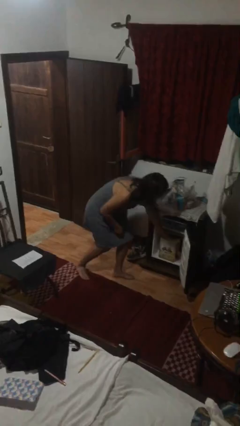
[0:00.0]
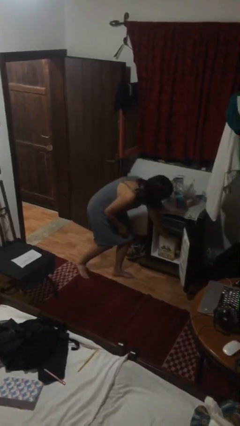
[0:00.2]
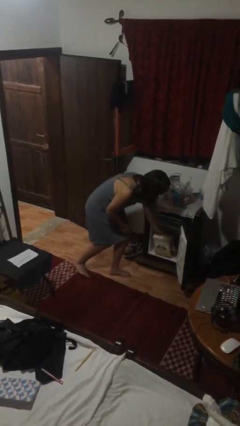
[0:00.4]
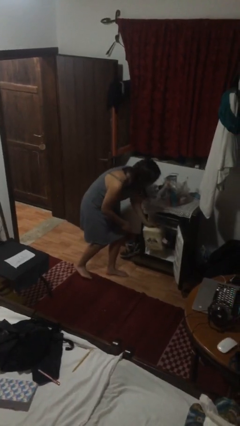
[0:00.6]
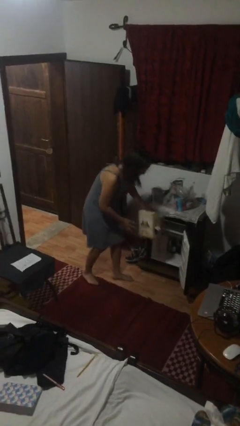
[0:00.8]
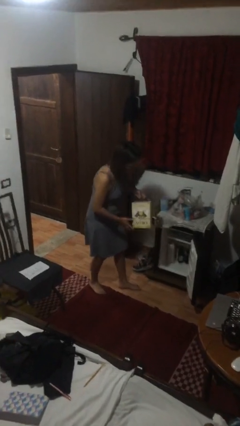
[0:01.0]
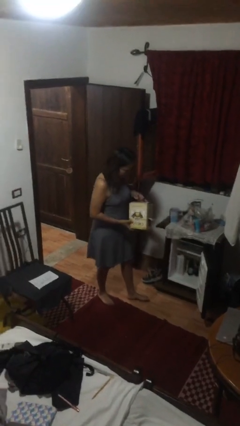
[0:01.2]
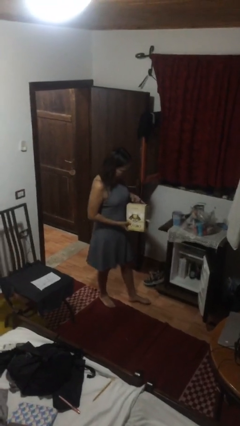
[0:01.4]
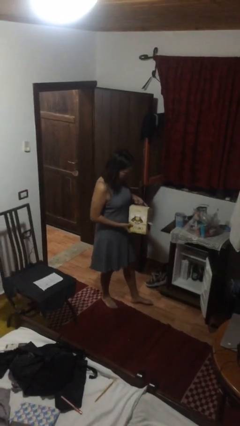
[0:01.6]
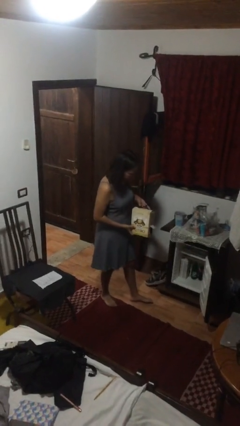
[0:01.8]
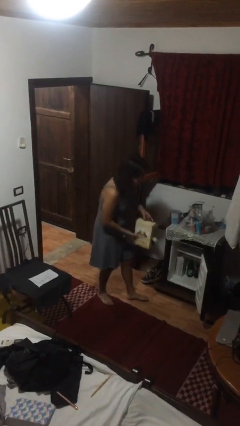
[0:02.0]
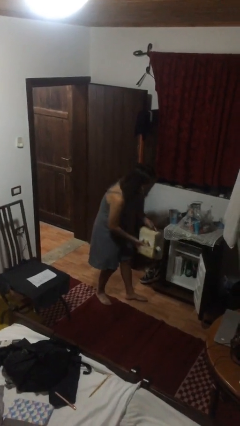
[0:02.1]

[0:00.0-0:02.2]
person picks up object from cabinet

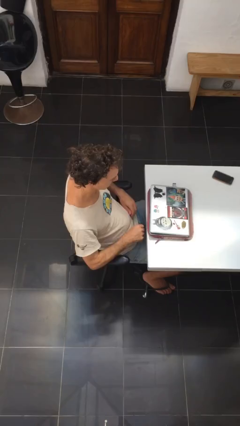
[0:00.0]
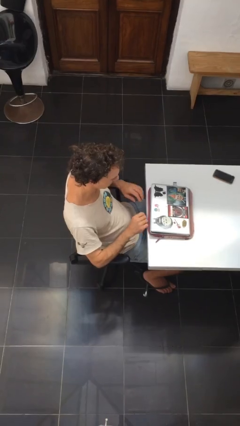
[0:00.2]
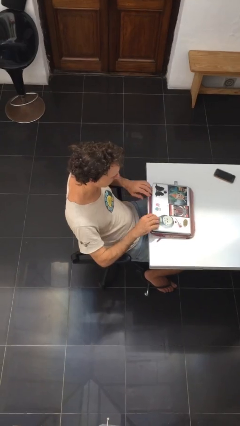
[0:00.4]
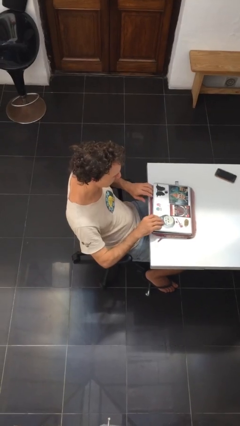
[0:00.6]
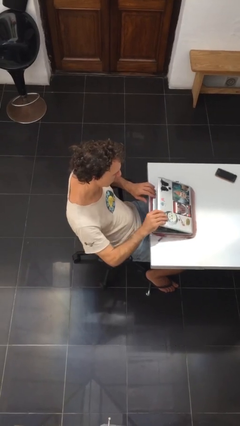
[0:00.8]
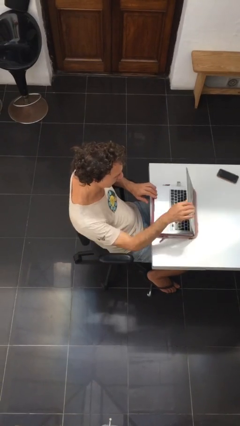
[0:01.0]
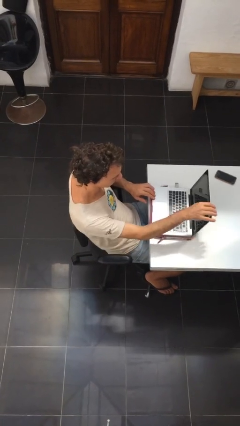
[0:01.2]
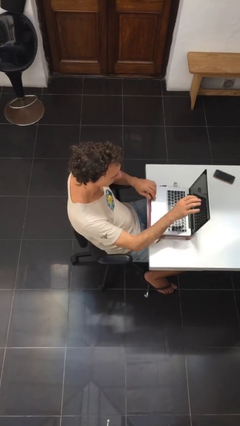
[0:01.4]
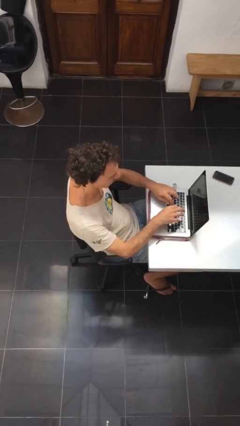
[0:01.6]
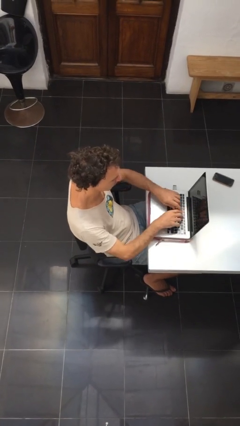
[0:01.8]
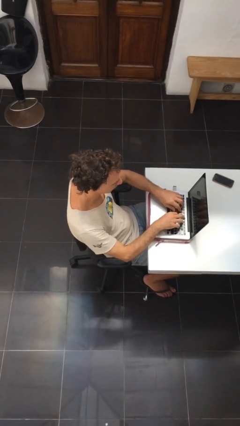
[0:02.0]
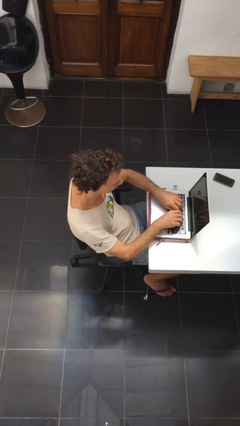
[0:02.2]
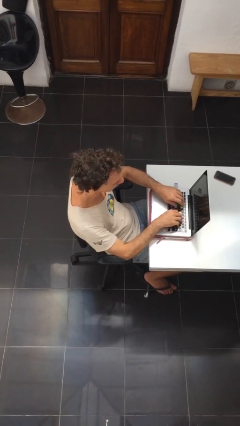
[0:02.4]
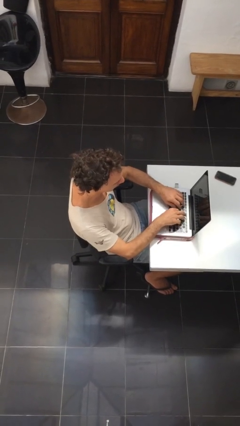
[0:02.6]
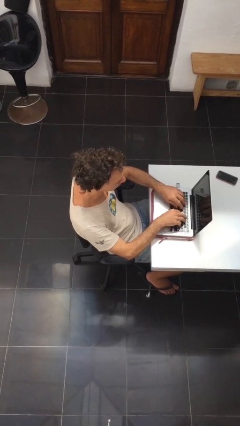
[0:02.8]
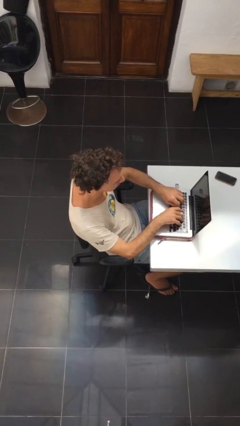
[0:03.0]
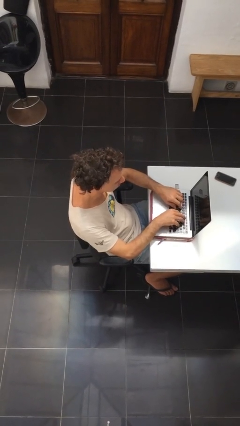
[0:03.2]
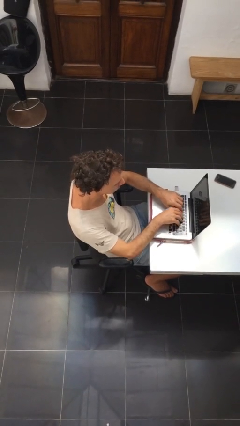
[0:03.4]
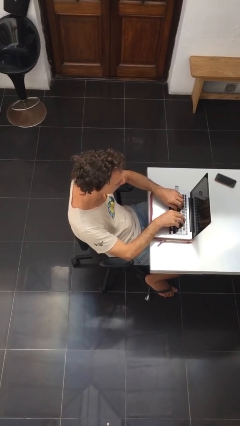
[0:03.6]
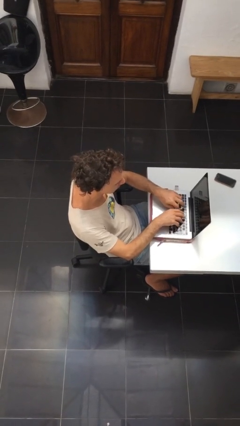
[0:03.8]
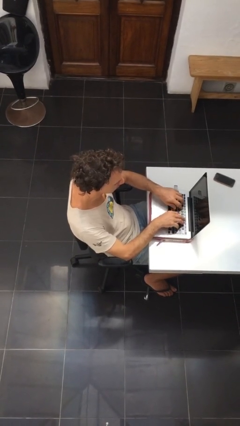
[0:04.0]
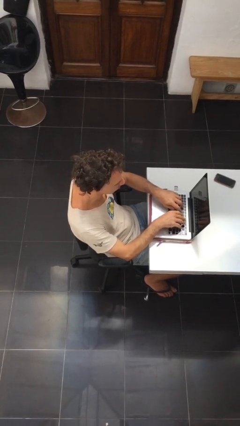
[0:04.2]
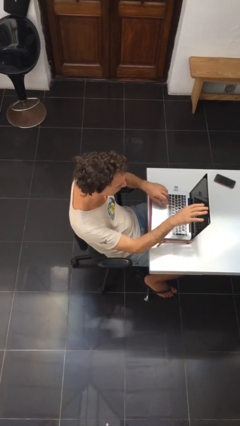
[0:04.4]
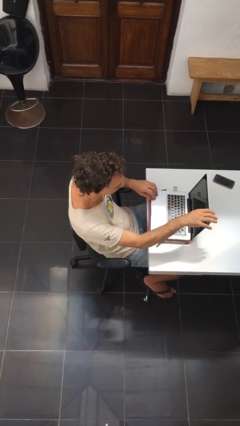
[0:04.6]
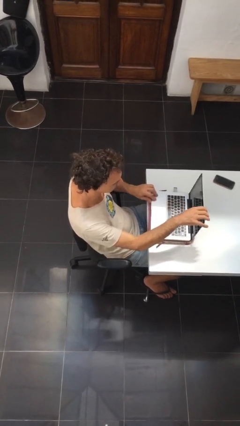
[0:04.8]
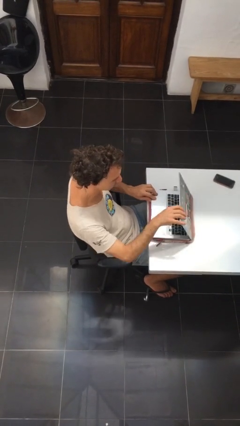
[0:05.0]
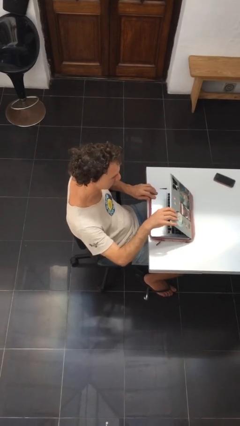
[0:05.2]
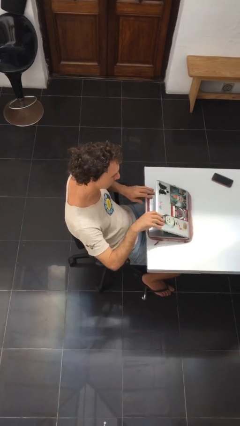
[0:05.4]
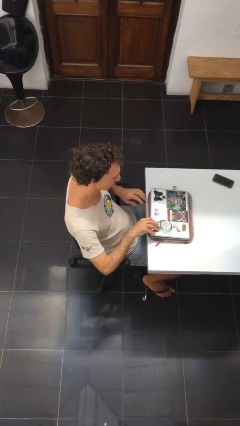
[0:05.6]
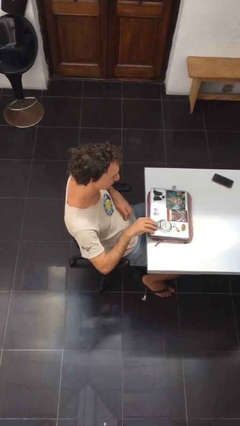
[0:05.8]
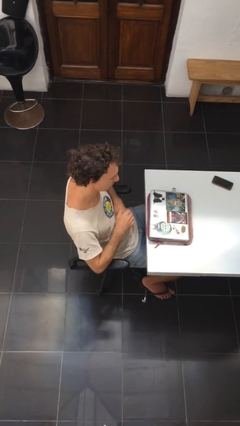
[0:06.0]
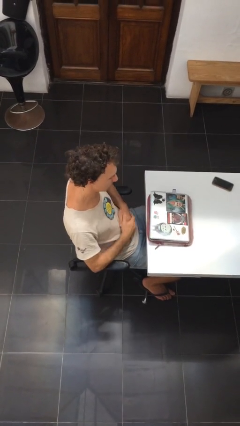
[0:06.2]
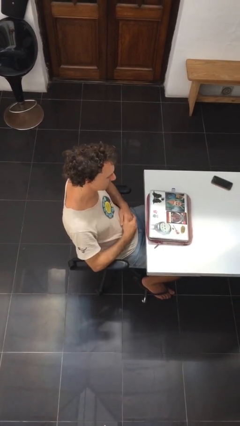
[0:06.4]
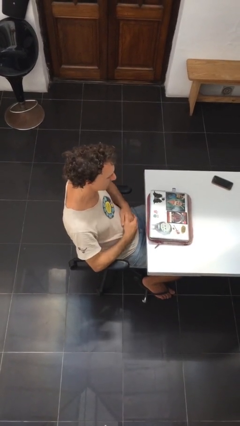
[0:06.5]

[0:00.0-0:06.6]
person interacts with laptop

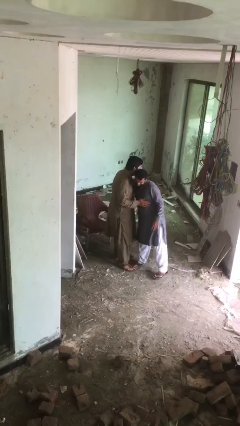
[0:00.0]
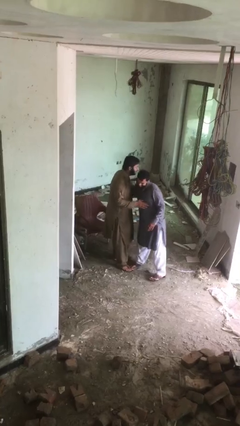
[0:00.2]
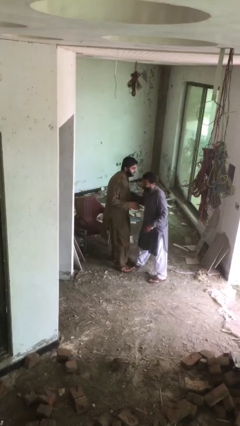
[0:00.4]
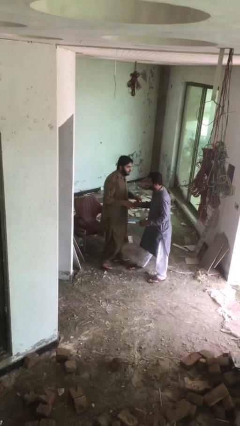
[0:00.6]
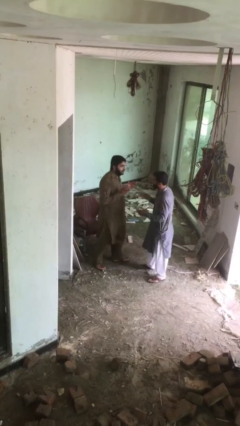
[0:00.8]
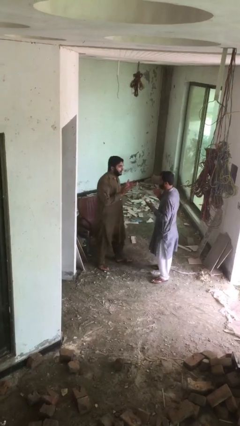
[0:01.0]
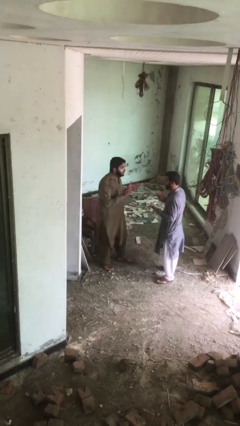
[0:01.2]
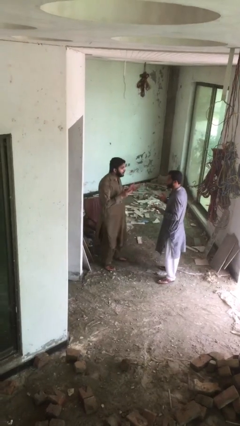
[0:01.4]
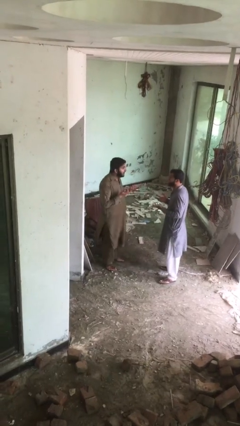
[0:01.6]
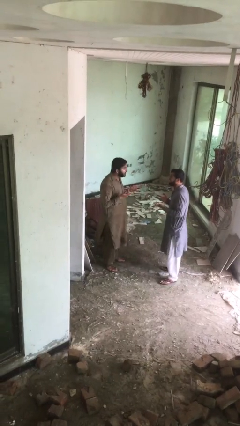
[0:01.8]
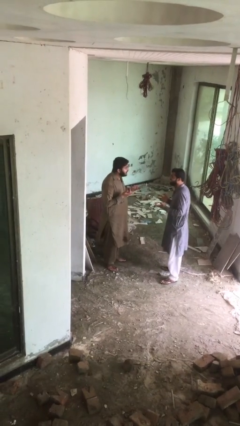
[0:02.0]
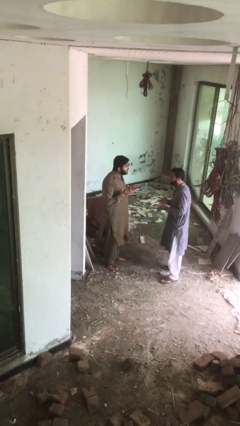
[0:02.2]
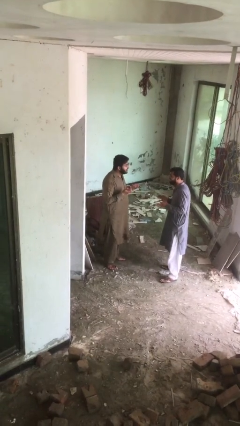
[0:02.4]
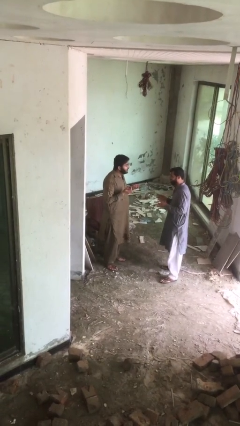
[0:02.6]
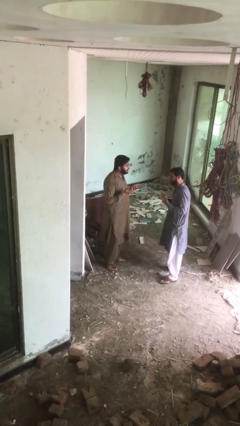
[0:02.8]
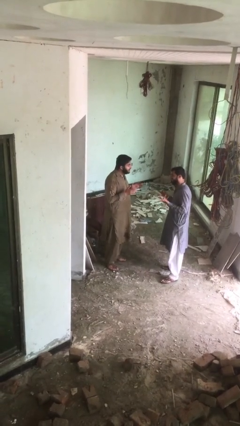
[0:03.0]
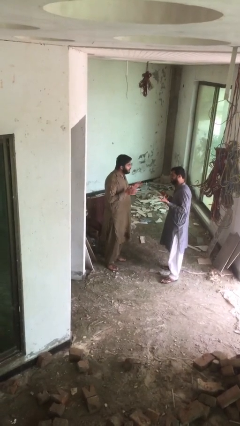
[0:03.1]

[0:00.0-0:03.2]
person talks to person

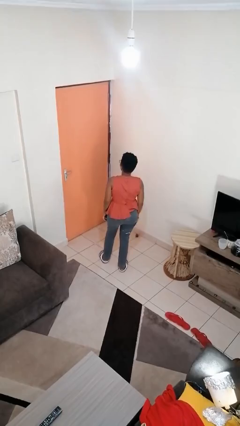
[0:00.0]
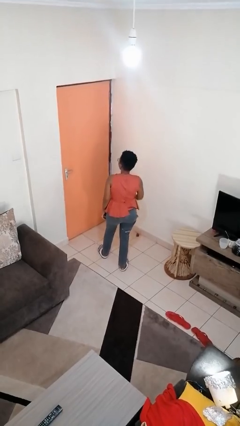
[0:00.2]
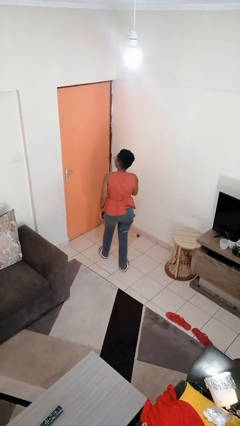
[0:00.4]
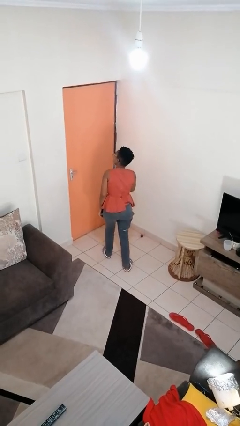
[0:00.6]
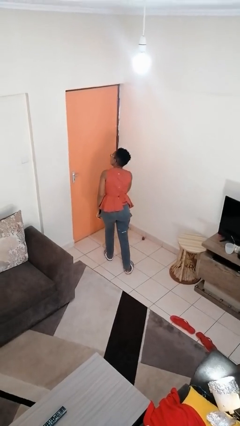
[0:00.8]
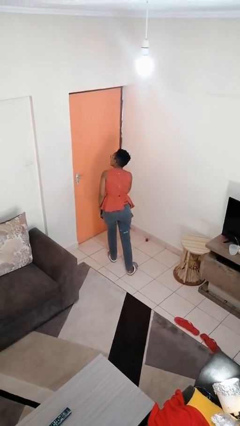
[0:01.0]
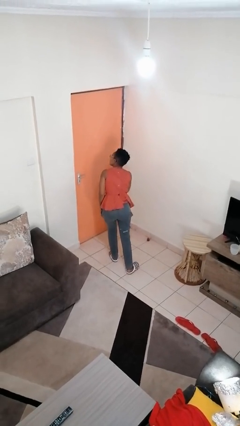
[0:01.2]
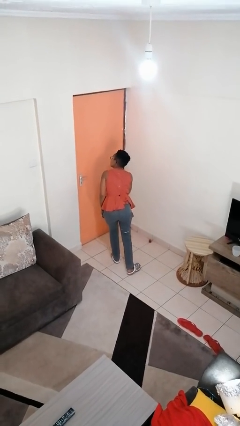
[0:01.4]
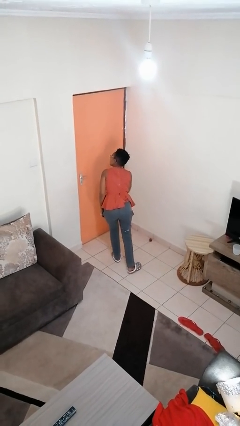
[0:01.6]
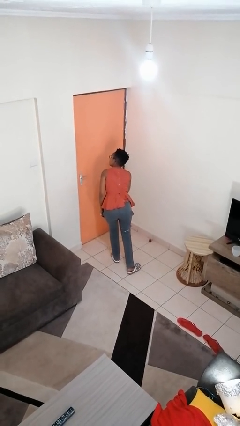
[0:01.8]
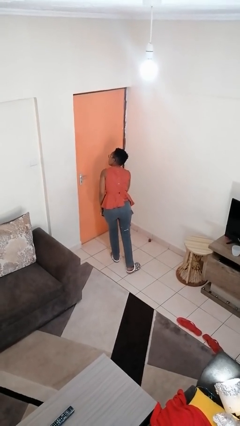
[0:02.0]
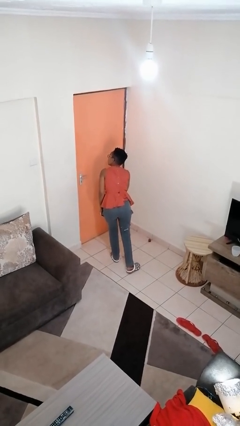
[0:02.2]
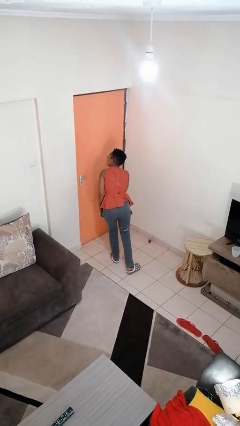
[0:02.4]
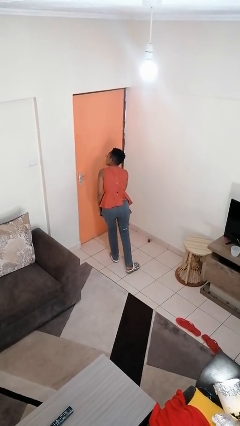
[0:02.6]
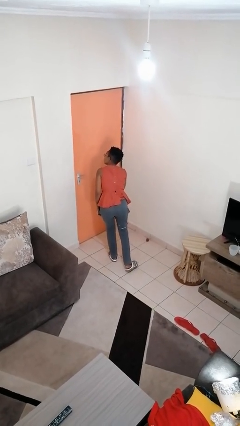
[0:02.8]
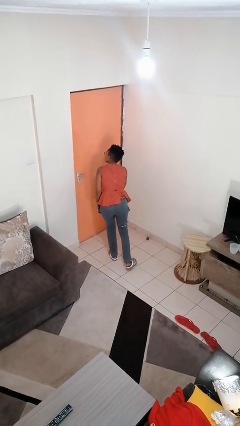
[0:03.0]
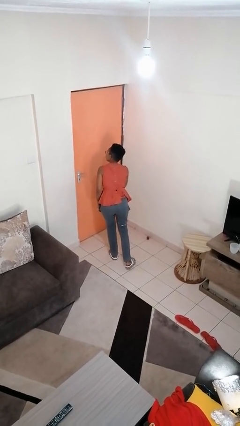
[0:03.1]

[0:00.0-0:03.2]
person gestures listen closely

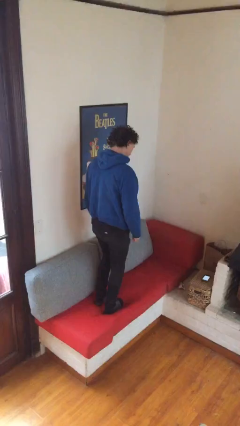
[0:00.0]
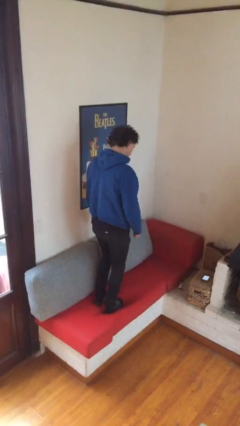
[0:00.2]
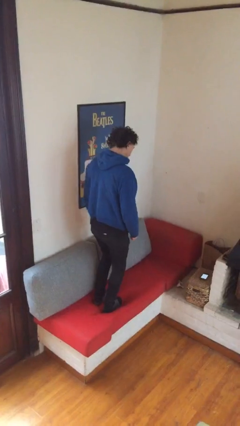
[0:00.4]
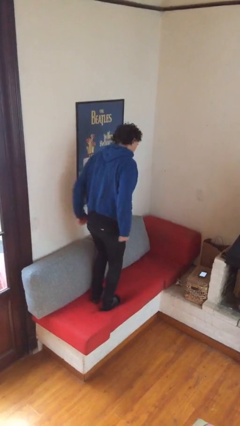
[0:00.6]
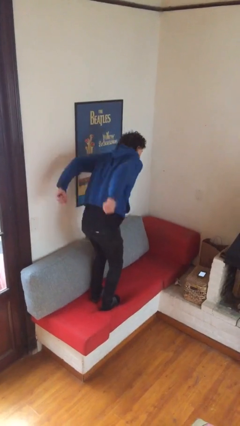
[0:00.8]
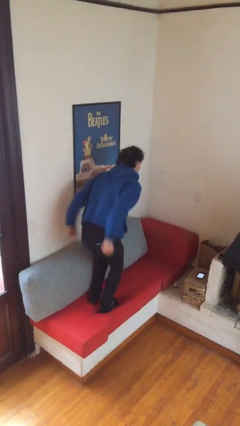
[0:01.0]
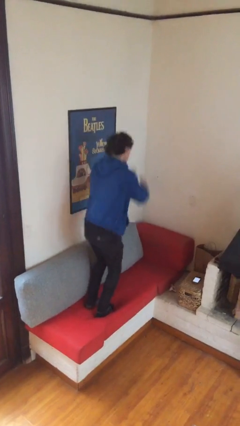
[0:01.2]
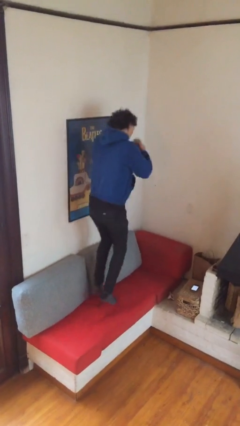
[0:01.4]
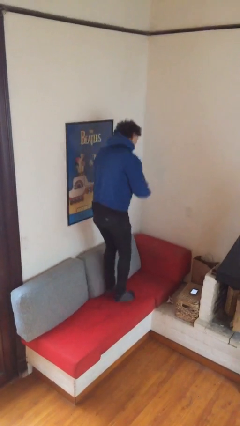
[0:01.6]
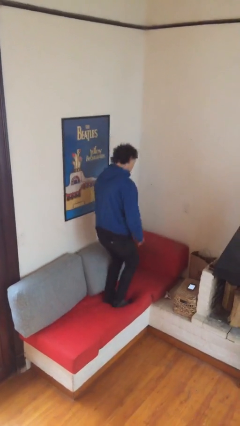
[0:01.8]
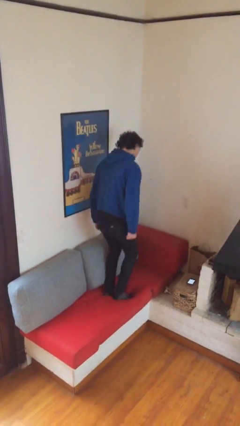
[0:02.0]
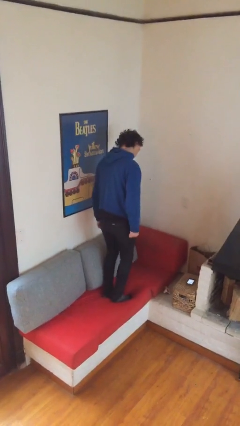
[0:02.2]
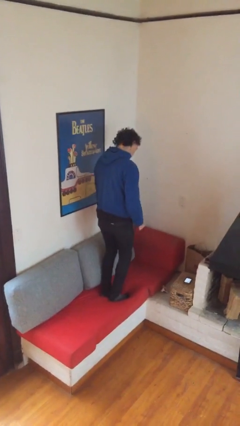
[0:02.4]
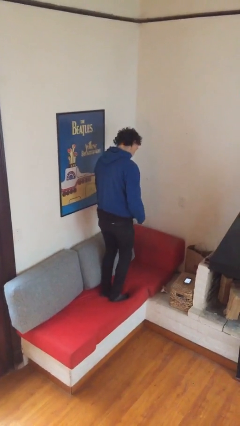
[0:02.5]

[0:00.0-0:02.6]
person jumps on couch
